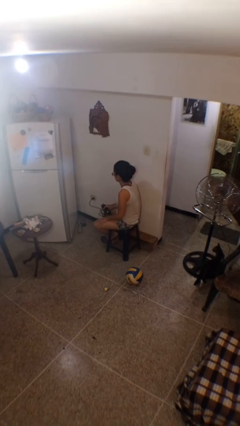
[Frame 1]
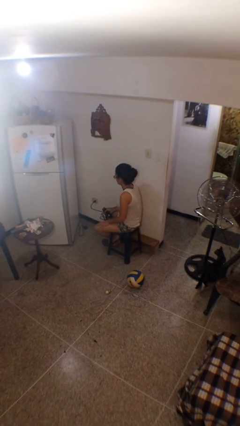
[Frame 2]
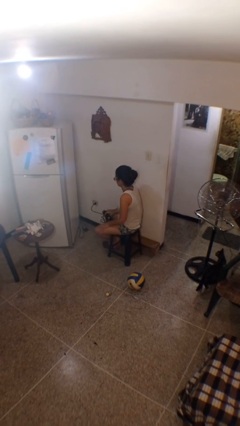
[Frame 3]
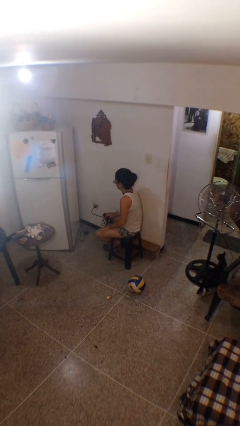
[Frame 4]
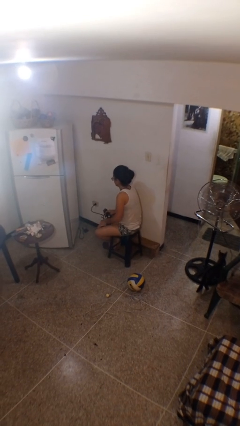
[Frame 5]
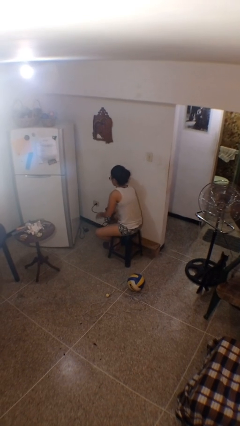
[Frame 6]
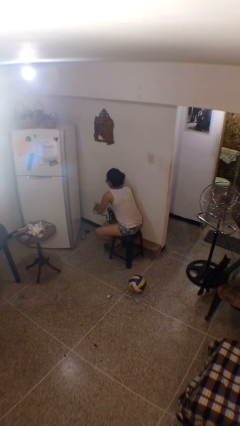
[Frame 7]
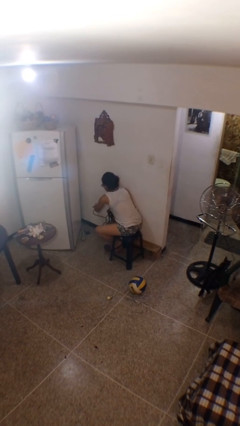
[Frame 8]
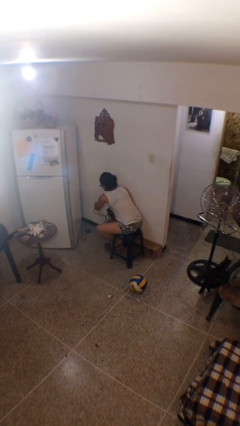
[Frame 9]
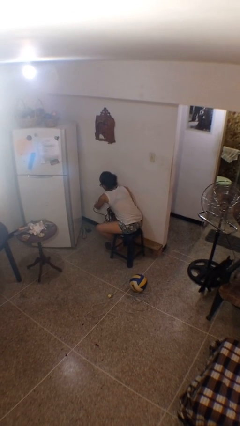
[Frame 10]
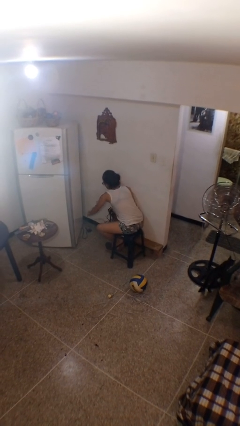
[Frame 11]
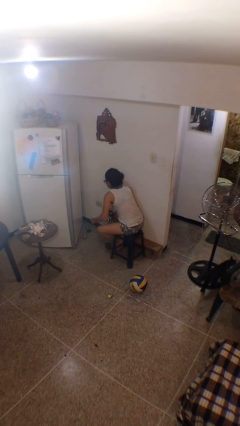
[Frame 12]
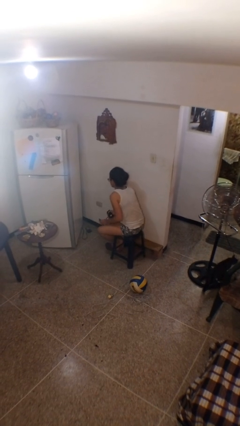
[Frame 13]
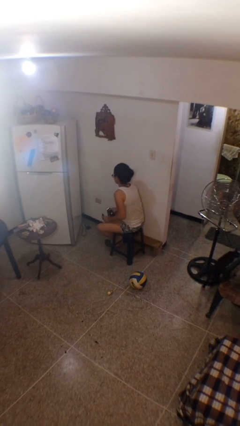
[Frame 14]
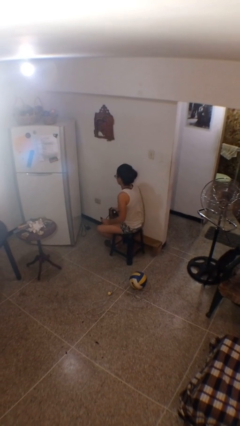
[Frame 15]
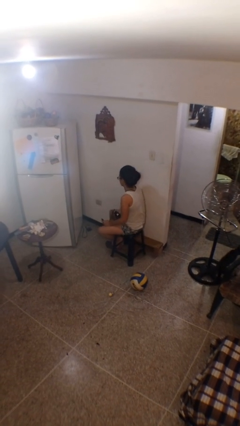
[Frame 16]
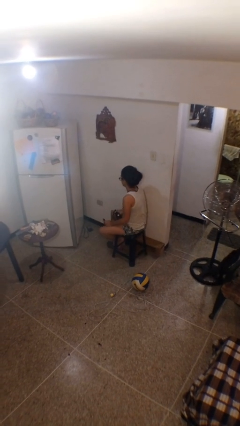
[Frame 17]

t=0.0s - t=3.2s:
person unplugs from electrical socket

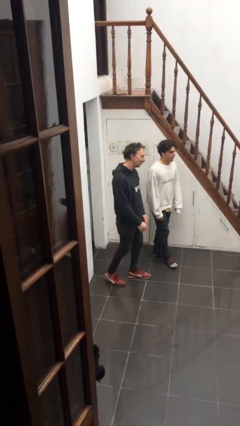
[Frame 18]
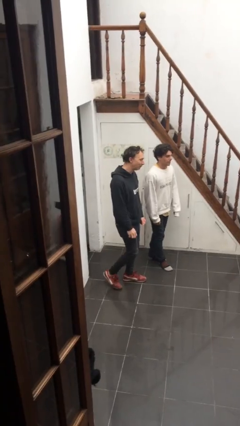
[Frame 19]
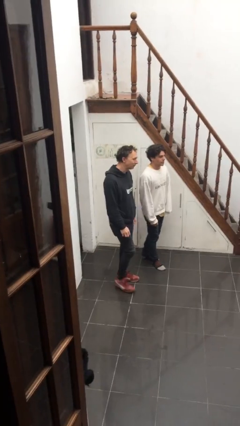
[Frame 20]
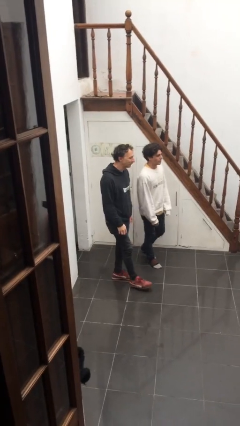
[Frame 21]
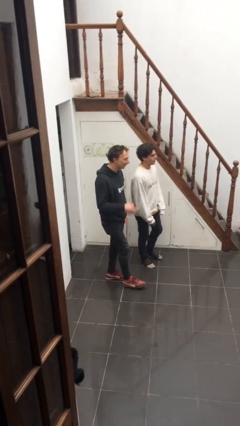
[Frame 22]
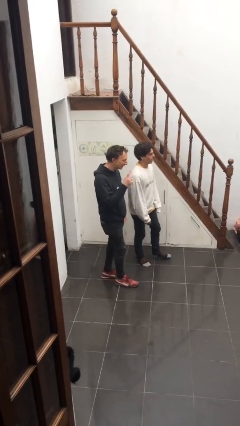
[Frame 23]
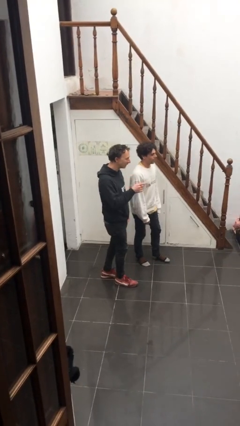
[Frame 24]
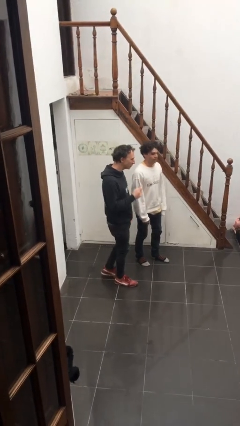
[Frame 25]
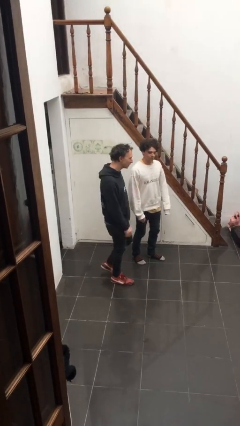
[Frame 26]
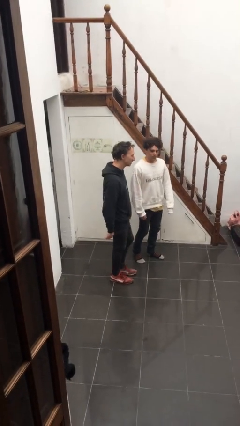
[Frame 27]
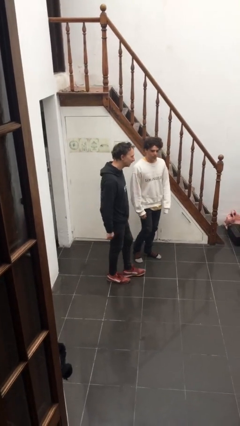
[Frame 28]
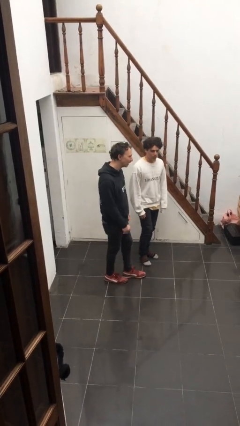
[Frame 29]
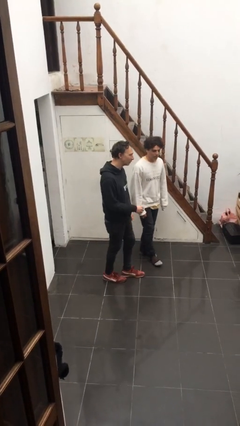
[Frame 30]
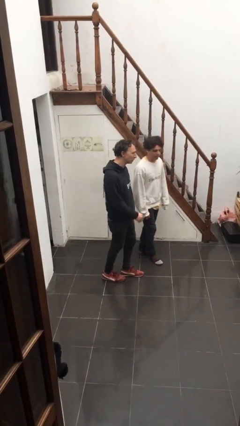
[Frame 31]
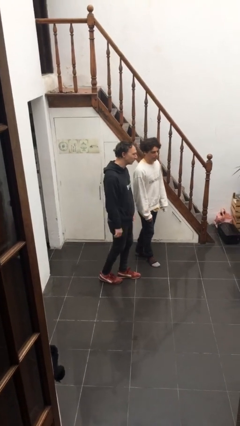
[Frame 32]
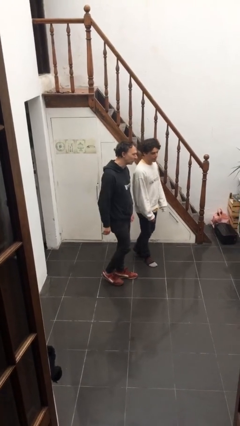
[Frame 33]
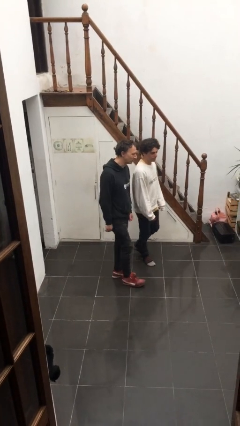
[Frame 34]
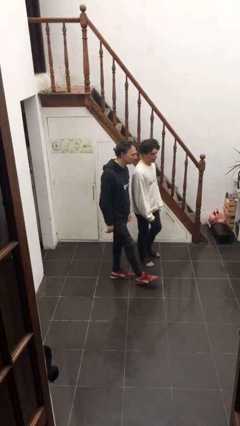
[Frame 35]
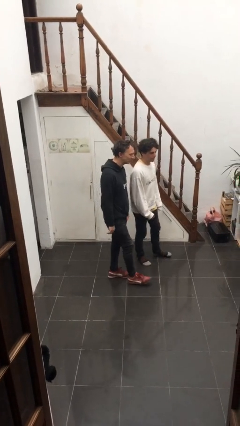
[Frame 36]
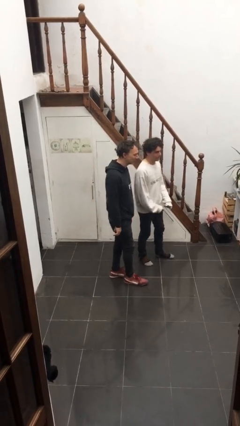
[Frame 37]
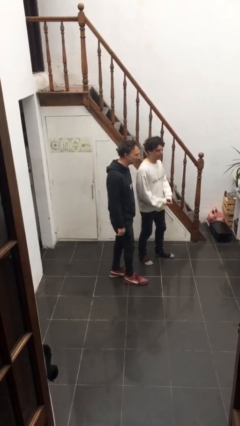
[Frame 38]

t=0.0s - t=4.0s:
person talks to person

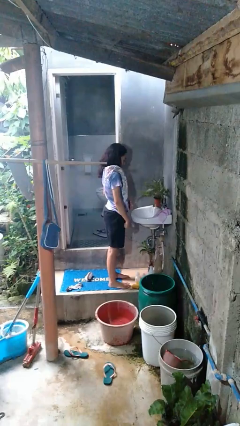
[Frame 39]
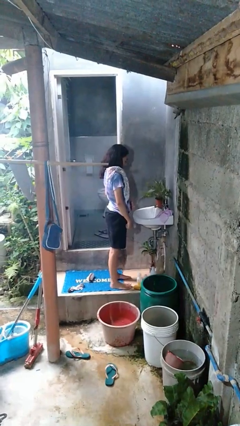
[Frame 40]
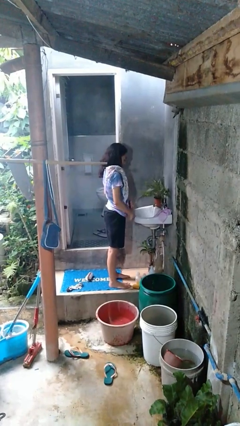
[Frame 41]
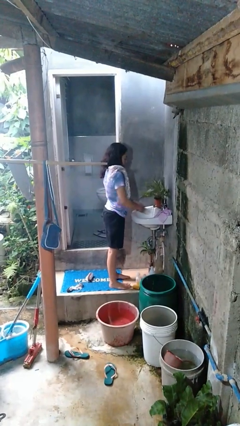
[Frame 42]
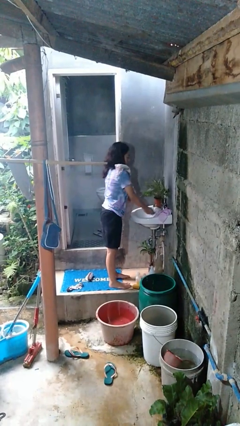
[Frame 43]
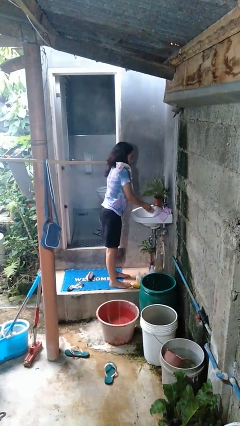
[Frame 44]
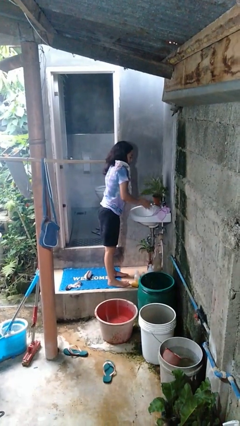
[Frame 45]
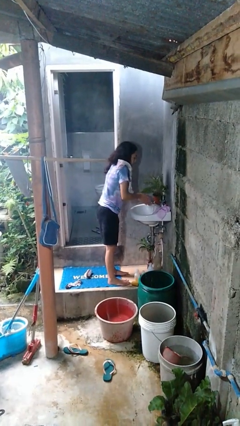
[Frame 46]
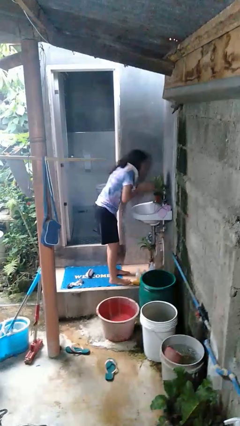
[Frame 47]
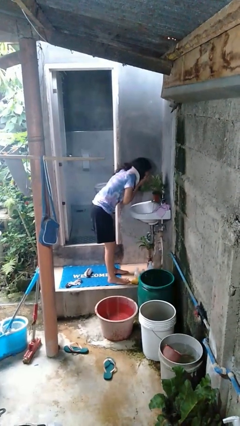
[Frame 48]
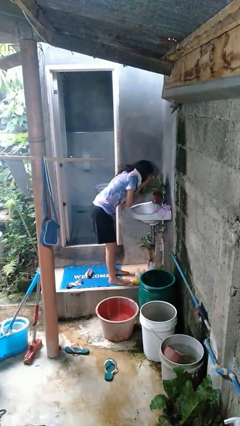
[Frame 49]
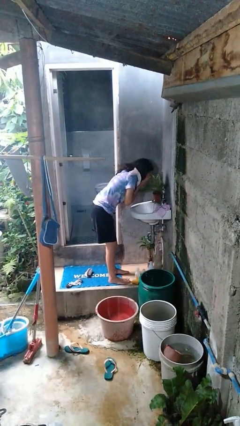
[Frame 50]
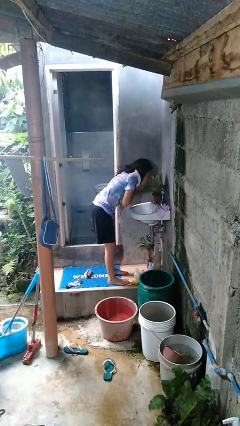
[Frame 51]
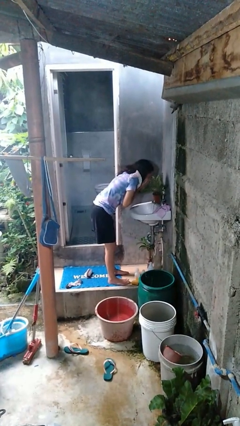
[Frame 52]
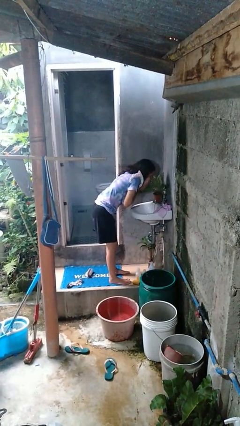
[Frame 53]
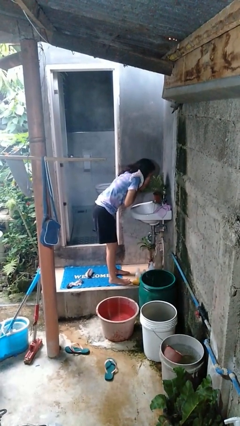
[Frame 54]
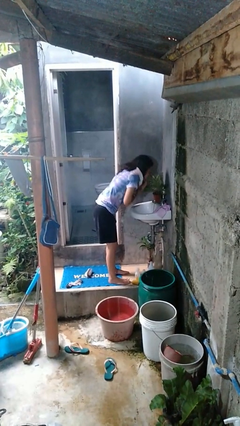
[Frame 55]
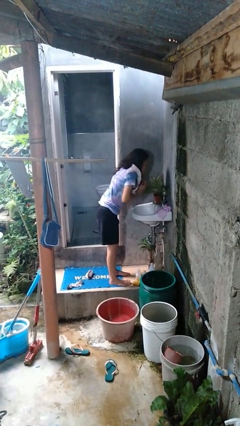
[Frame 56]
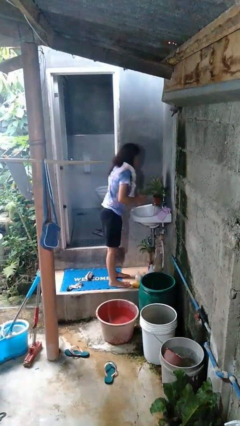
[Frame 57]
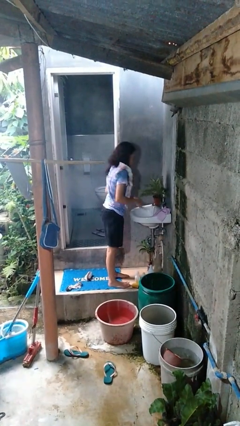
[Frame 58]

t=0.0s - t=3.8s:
person washes face

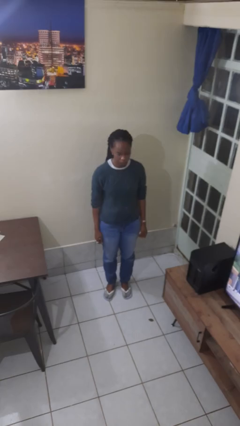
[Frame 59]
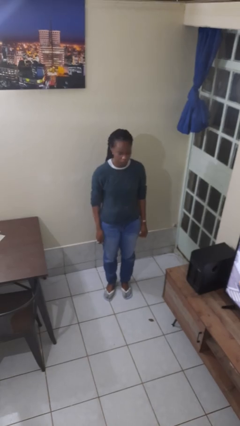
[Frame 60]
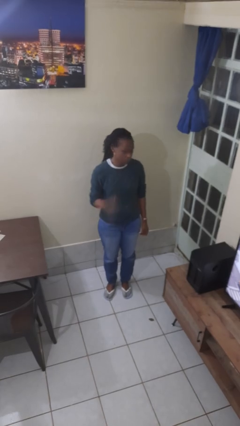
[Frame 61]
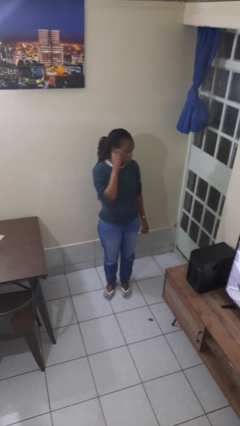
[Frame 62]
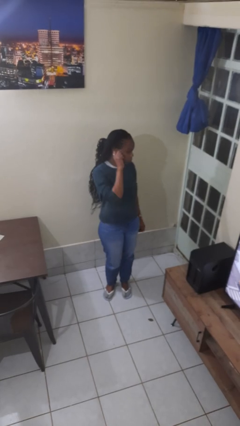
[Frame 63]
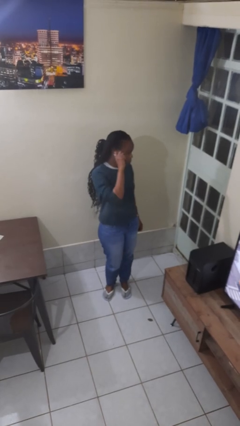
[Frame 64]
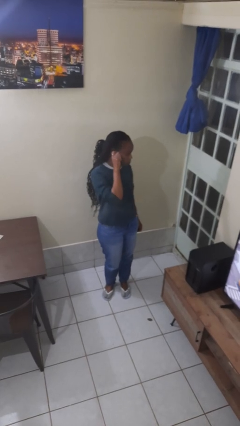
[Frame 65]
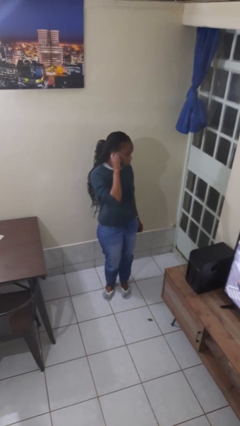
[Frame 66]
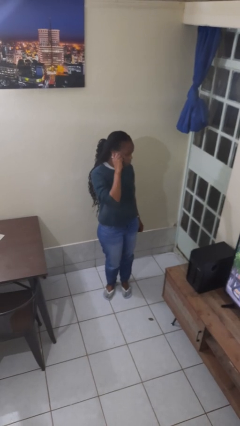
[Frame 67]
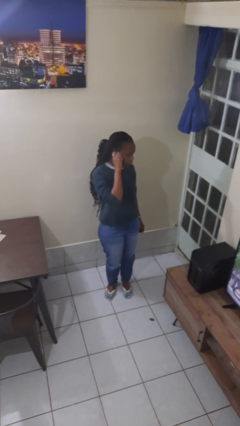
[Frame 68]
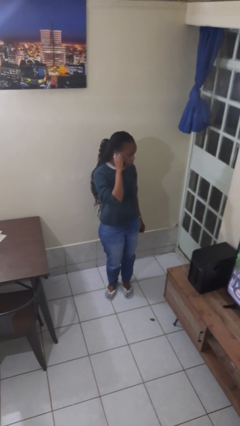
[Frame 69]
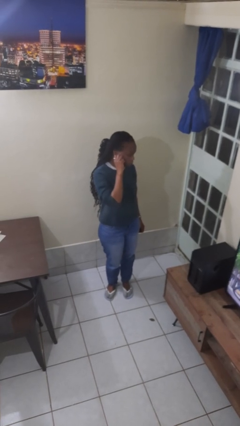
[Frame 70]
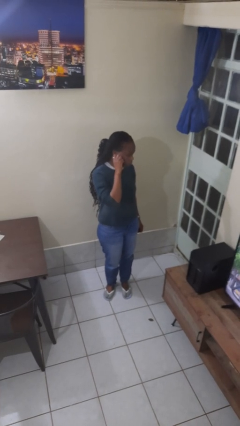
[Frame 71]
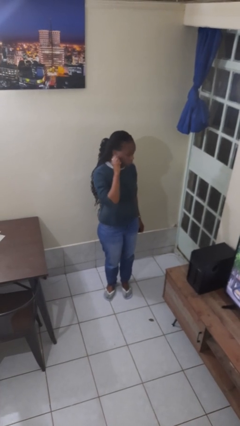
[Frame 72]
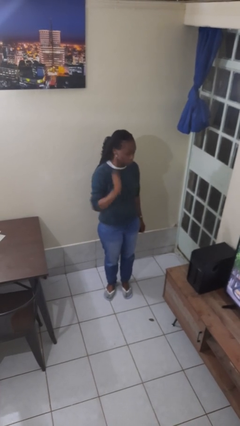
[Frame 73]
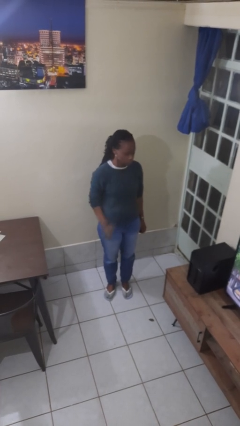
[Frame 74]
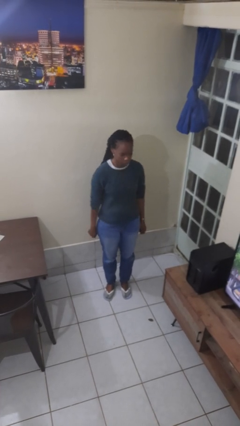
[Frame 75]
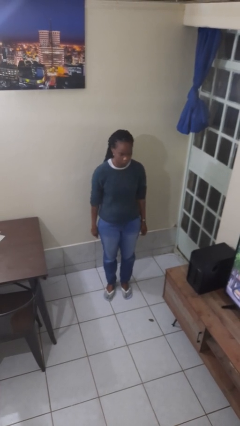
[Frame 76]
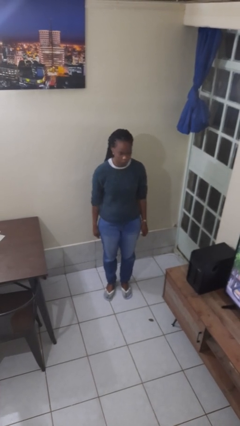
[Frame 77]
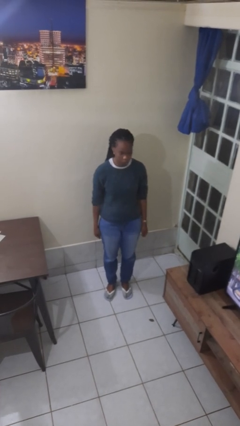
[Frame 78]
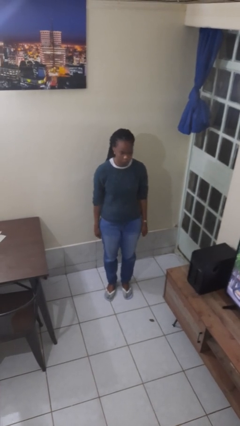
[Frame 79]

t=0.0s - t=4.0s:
person touches earlobe

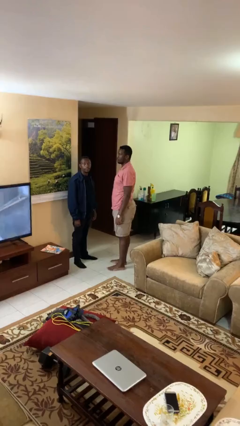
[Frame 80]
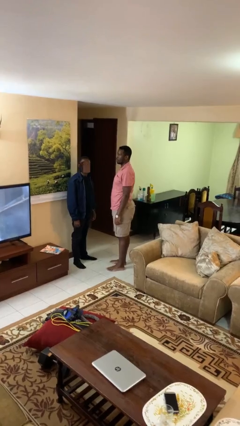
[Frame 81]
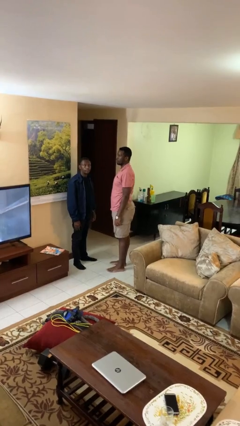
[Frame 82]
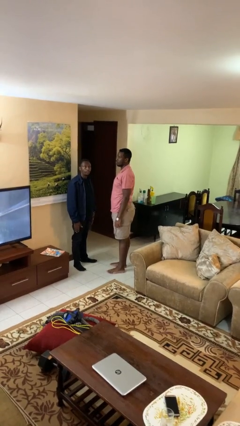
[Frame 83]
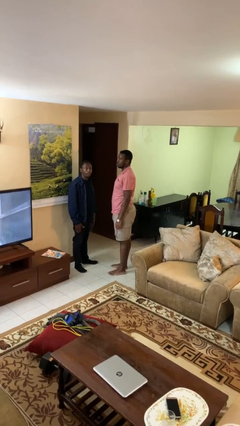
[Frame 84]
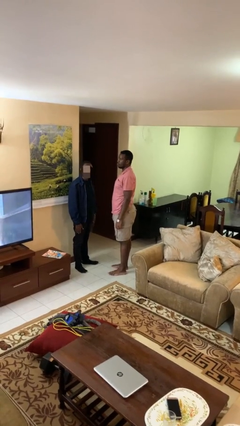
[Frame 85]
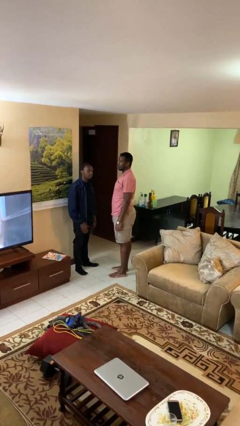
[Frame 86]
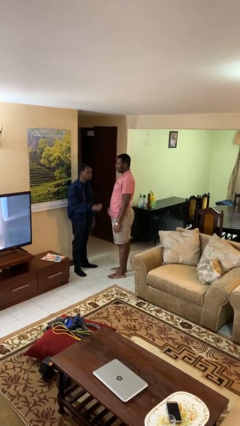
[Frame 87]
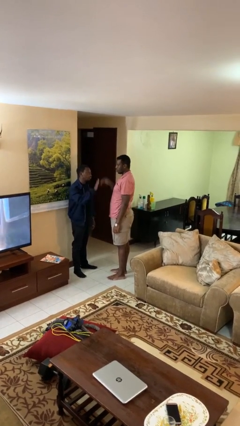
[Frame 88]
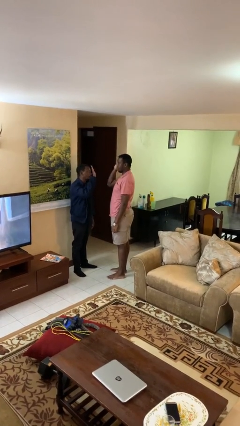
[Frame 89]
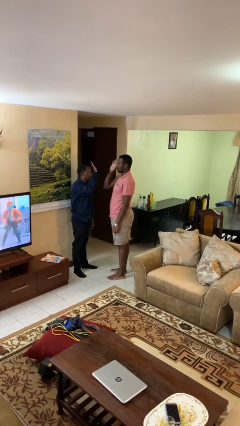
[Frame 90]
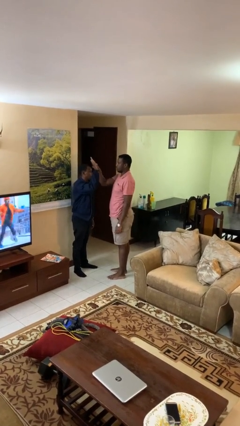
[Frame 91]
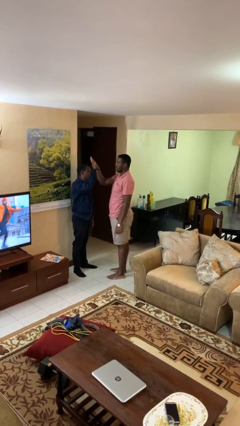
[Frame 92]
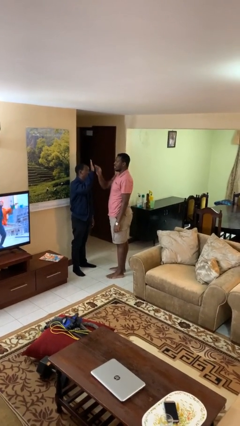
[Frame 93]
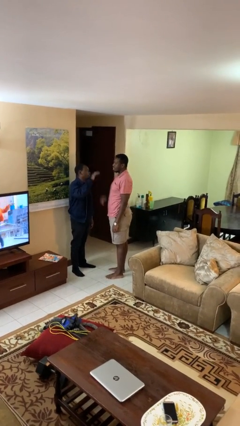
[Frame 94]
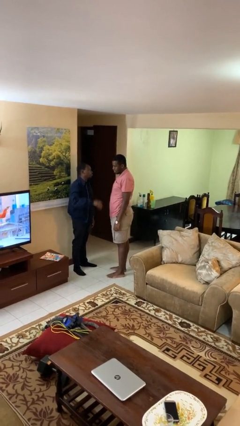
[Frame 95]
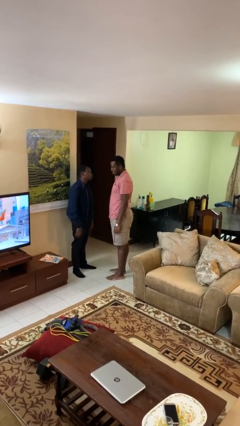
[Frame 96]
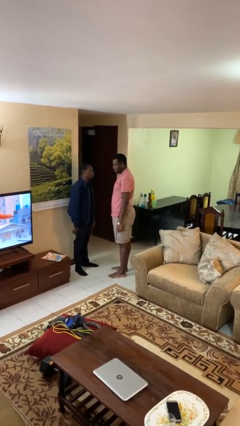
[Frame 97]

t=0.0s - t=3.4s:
person highfives hand
